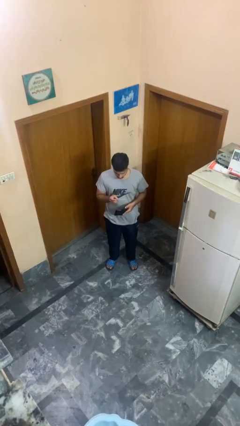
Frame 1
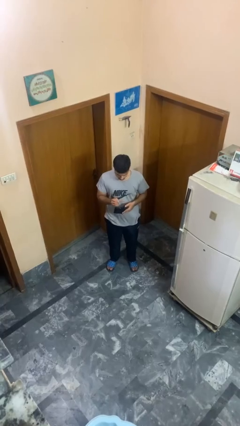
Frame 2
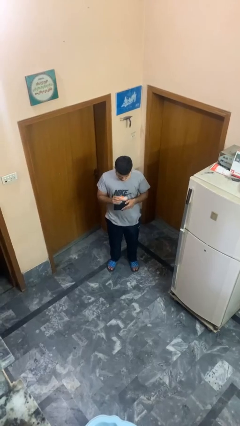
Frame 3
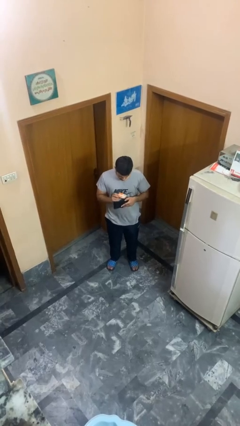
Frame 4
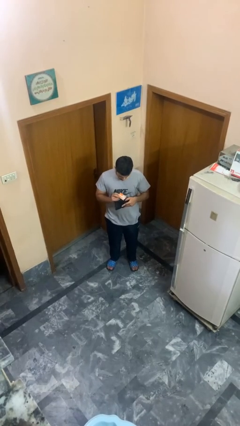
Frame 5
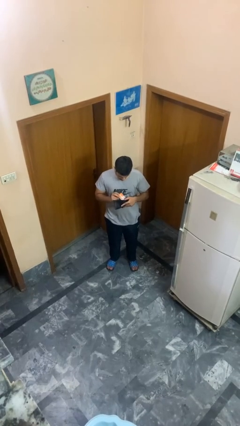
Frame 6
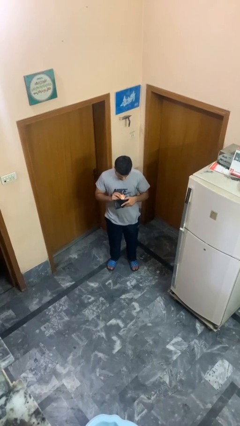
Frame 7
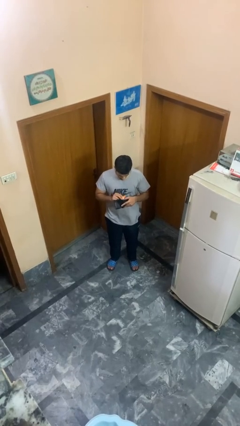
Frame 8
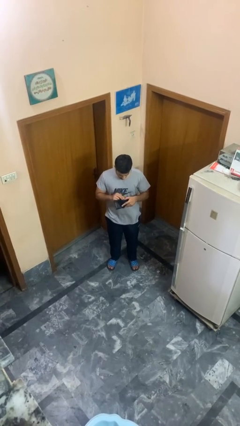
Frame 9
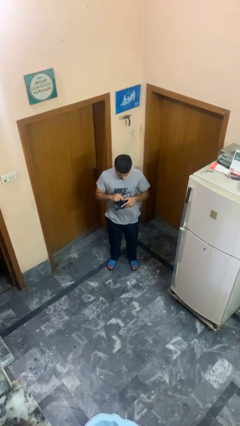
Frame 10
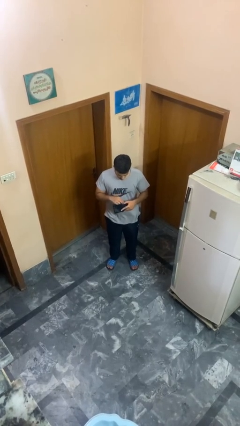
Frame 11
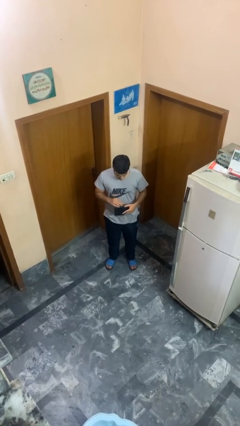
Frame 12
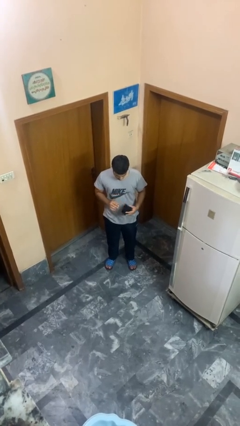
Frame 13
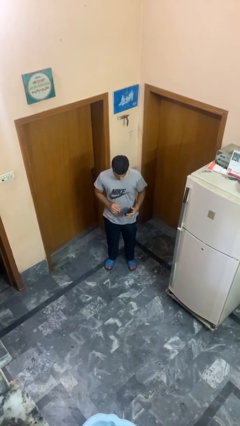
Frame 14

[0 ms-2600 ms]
person puts object into purse

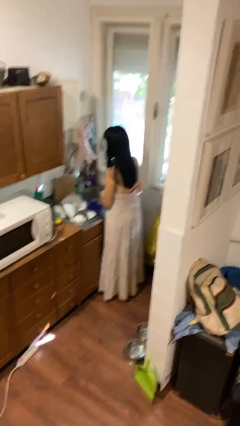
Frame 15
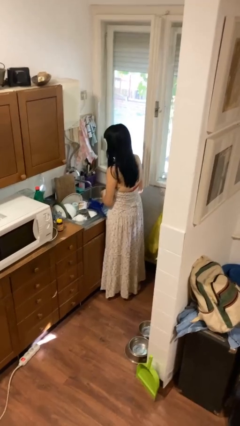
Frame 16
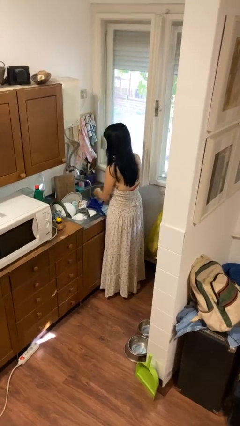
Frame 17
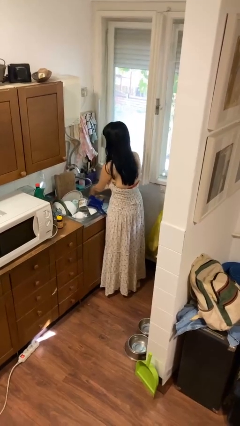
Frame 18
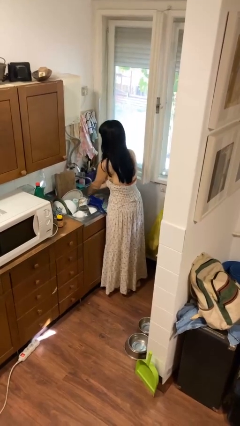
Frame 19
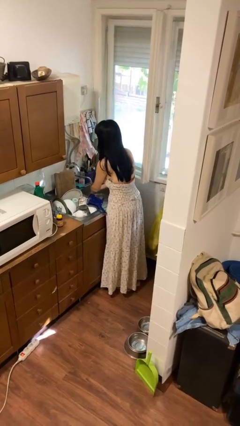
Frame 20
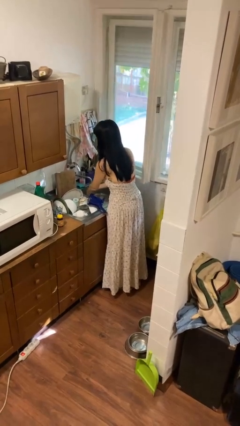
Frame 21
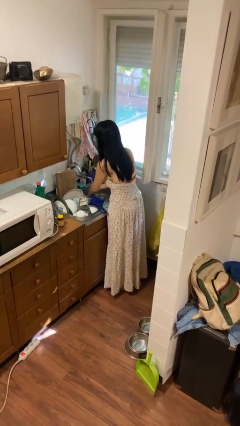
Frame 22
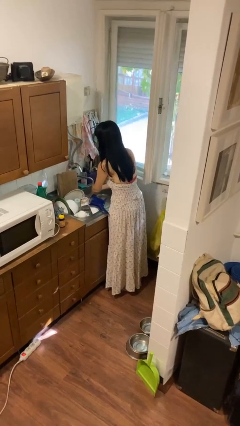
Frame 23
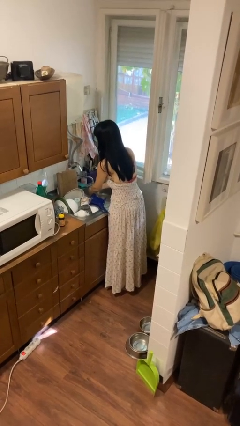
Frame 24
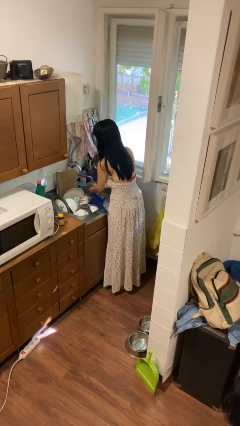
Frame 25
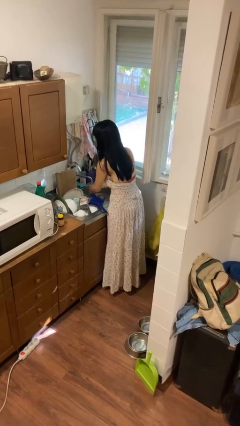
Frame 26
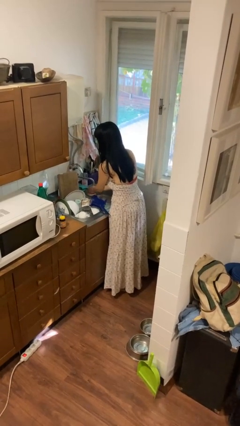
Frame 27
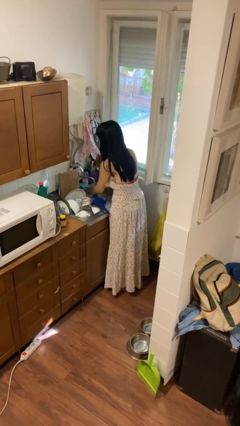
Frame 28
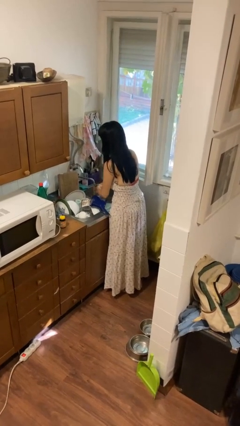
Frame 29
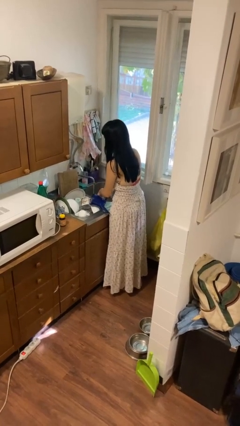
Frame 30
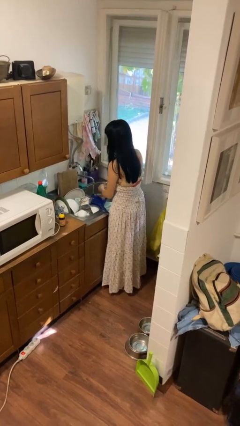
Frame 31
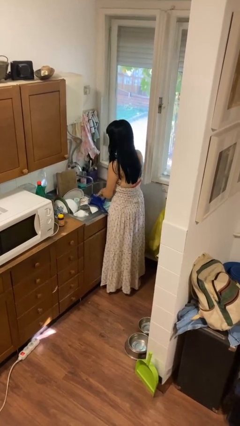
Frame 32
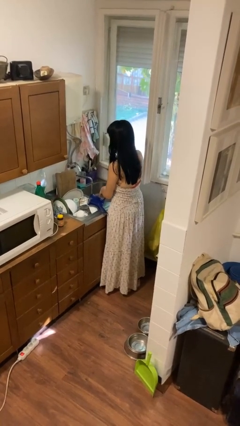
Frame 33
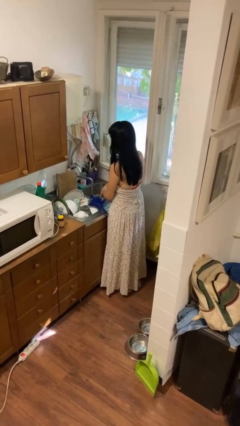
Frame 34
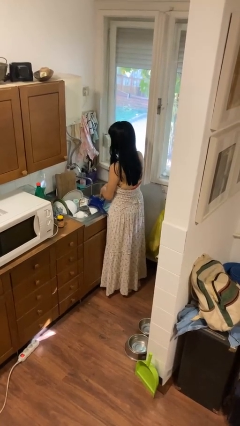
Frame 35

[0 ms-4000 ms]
person washes hands

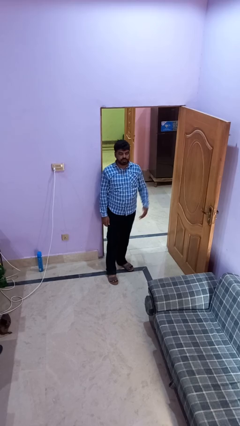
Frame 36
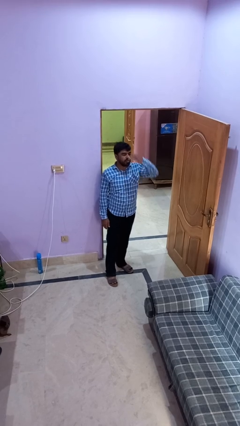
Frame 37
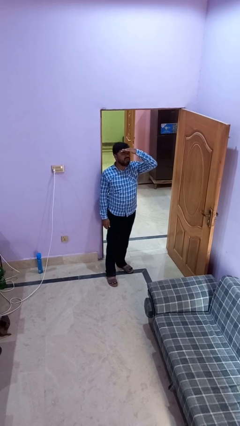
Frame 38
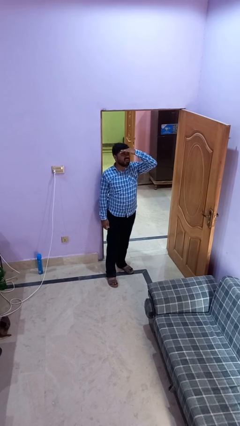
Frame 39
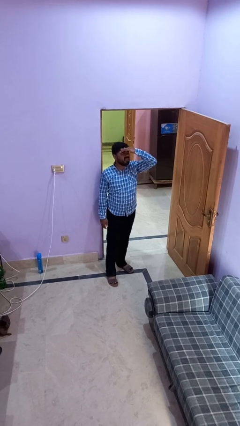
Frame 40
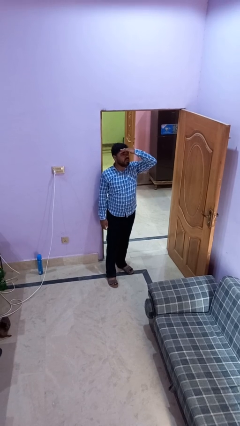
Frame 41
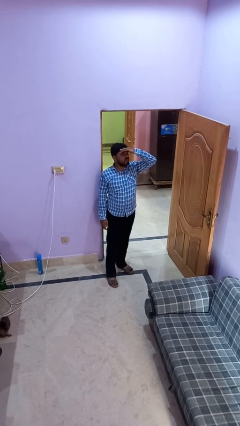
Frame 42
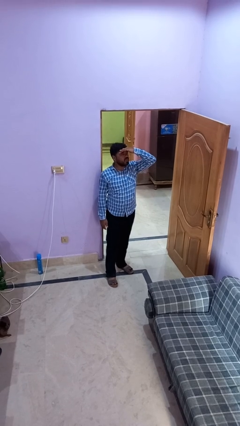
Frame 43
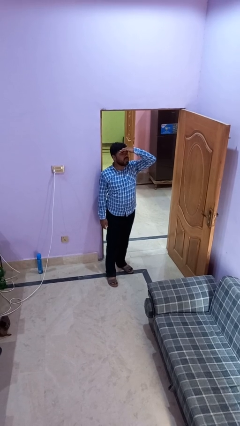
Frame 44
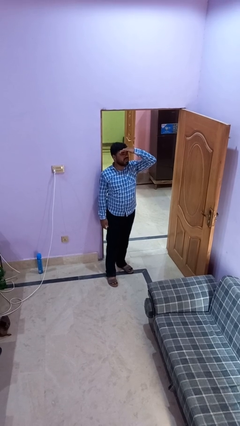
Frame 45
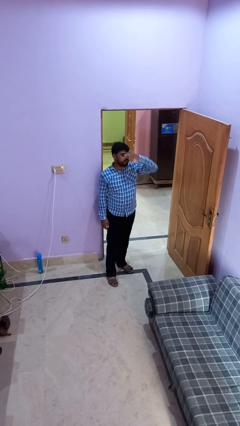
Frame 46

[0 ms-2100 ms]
person shades eyes

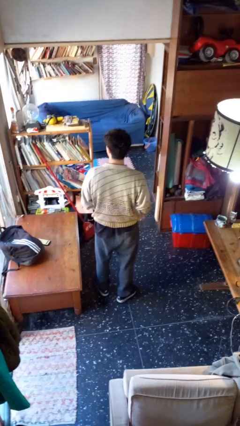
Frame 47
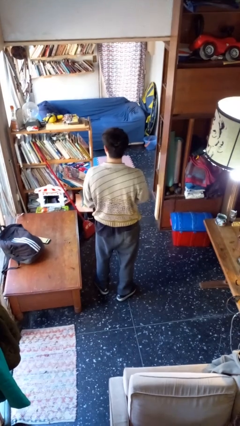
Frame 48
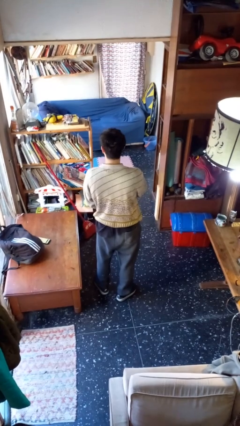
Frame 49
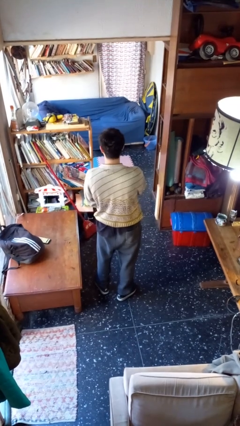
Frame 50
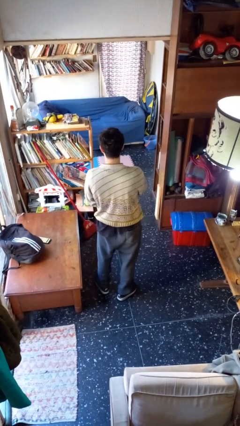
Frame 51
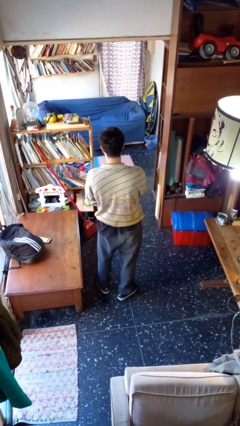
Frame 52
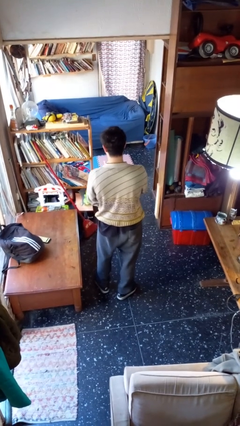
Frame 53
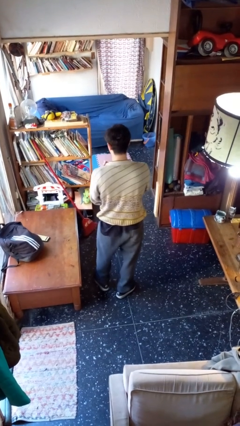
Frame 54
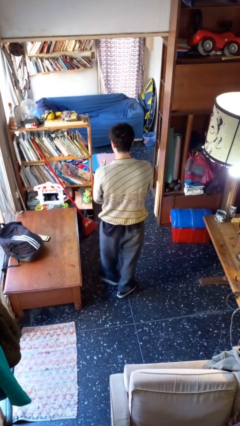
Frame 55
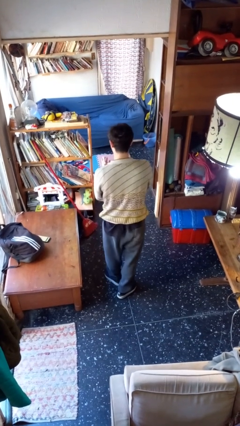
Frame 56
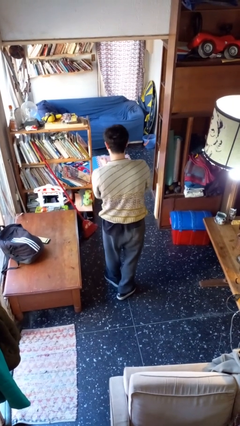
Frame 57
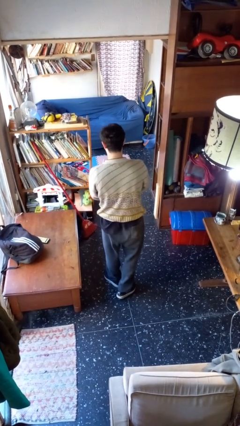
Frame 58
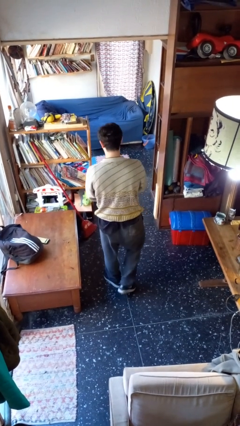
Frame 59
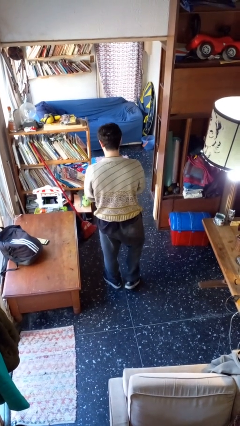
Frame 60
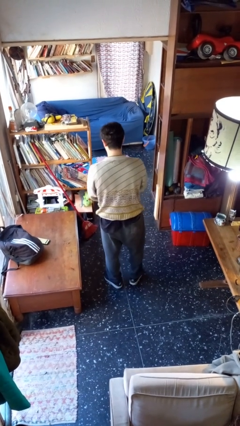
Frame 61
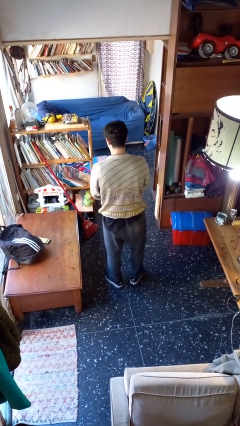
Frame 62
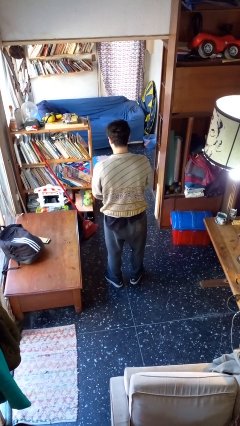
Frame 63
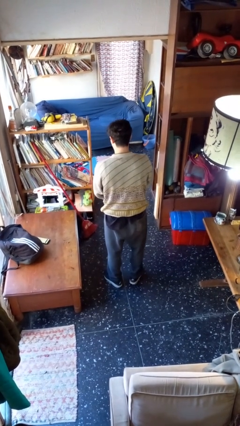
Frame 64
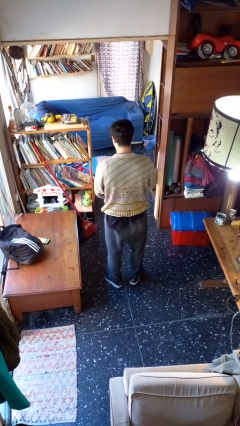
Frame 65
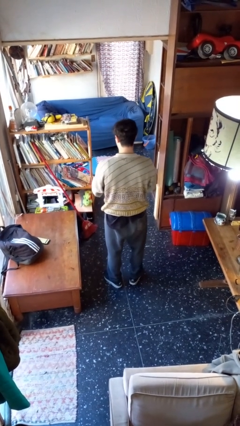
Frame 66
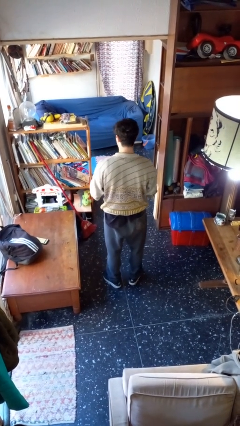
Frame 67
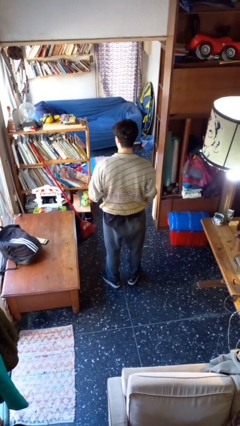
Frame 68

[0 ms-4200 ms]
person puts on wristwatch

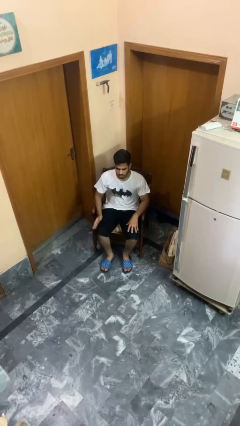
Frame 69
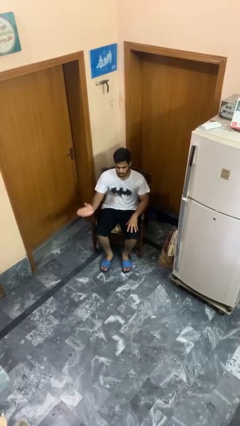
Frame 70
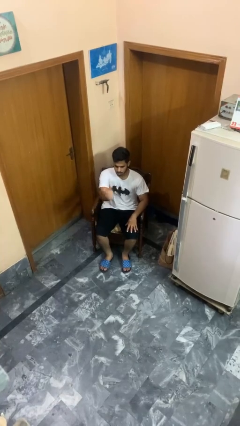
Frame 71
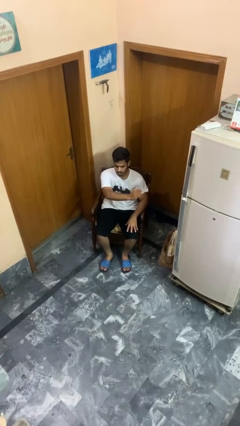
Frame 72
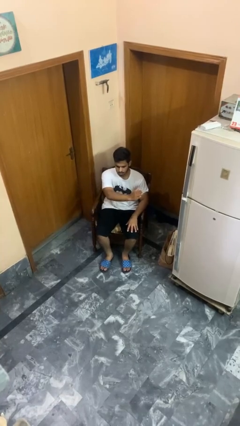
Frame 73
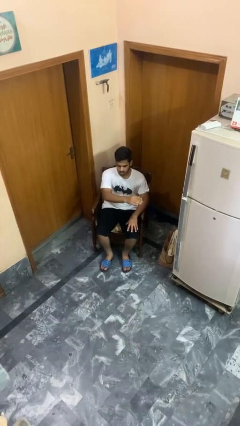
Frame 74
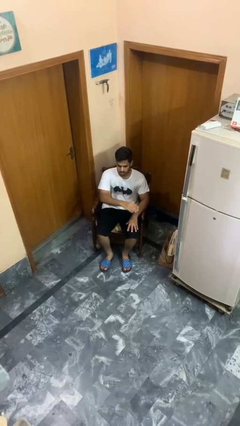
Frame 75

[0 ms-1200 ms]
person gestures swipe left

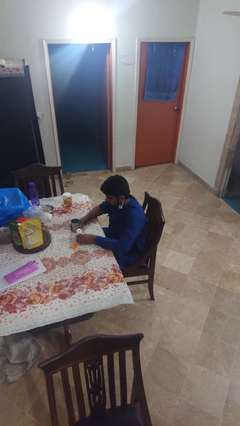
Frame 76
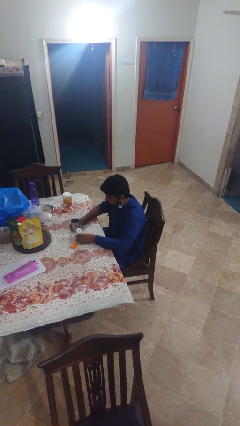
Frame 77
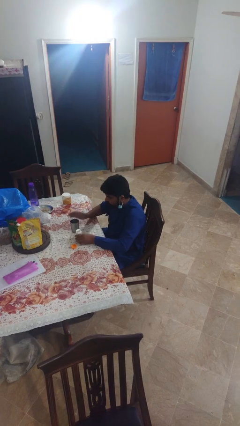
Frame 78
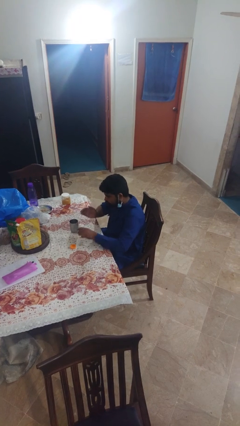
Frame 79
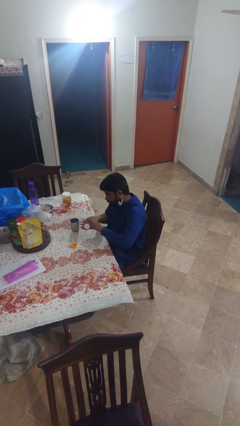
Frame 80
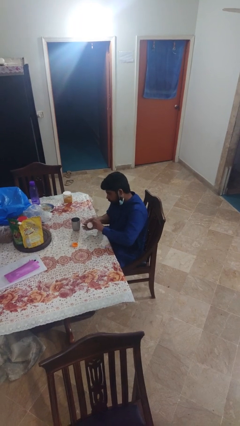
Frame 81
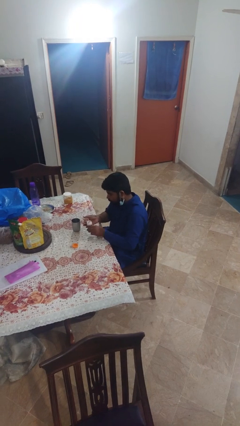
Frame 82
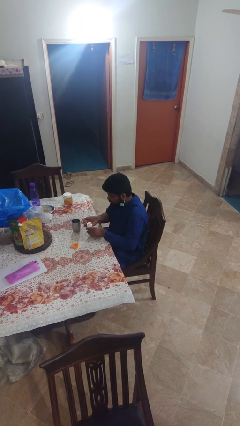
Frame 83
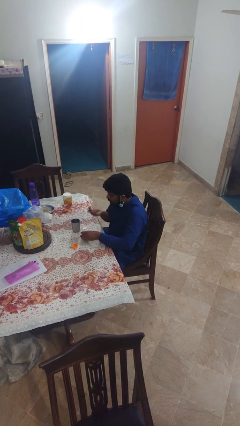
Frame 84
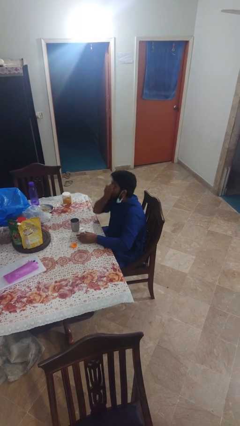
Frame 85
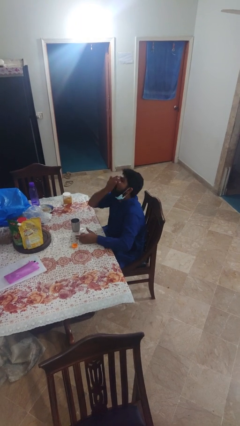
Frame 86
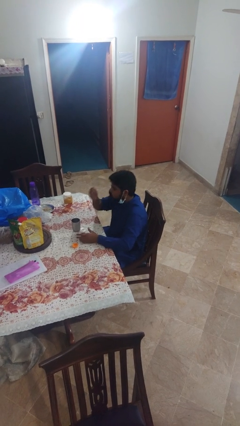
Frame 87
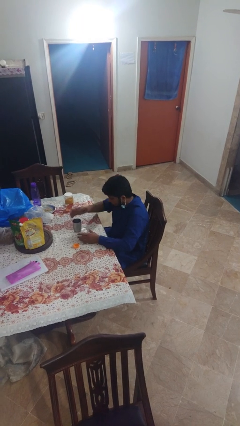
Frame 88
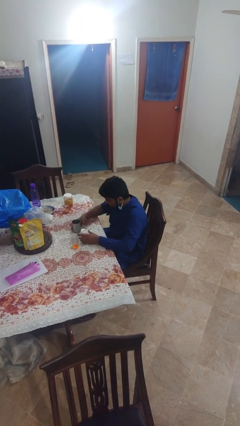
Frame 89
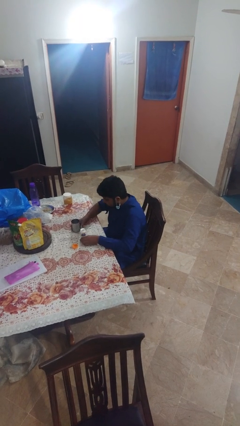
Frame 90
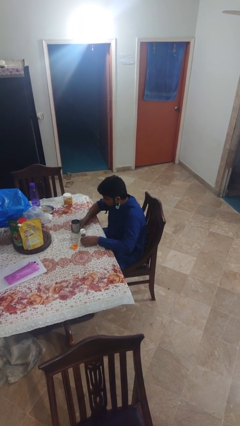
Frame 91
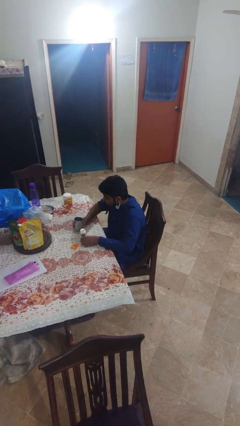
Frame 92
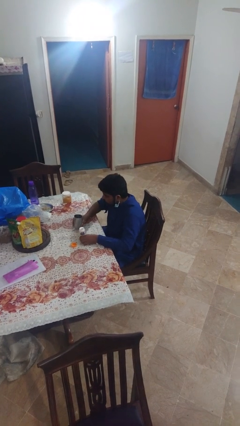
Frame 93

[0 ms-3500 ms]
person takes medicine pills
